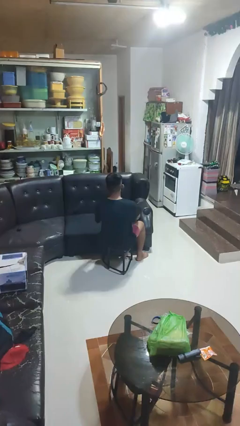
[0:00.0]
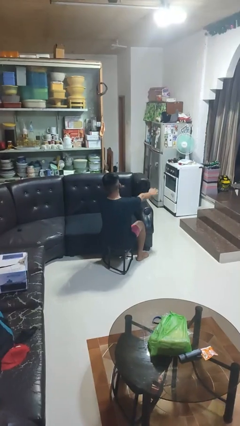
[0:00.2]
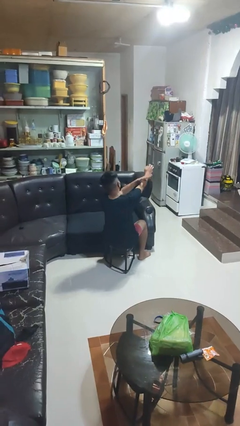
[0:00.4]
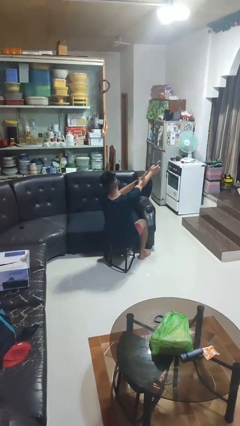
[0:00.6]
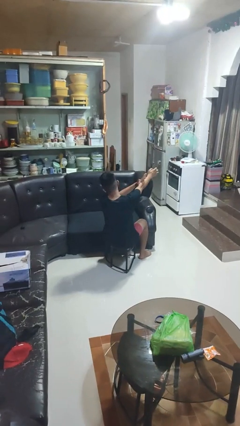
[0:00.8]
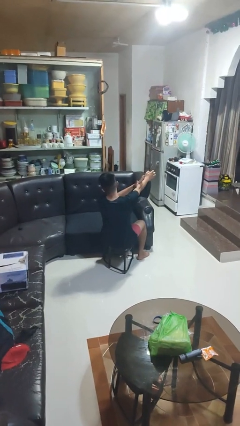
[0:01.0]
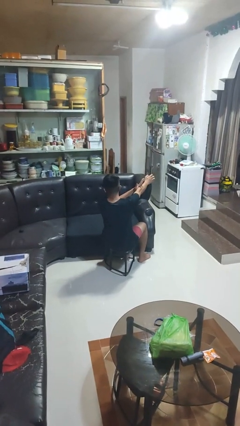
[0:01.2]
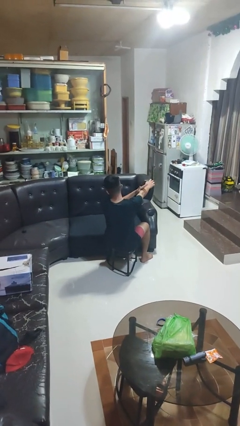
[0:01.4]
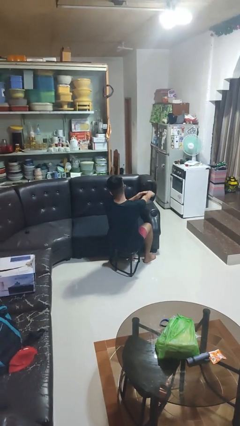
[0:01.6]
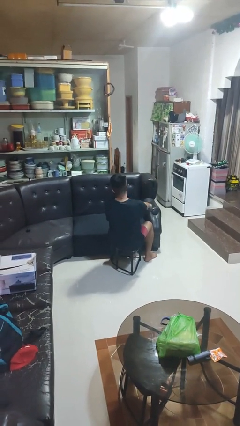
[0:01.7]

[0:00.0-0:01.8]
person swats bug
